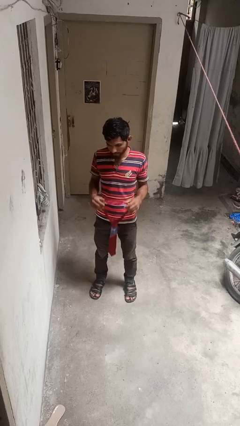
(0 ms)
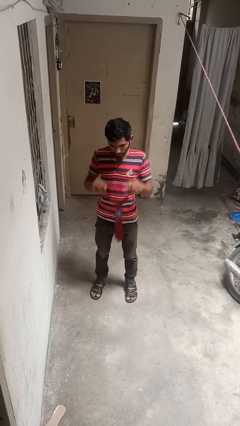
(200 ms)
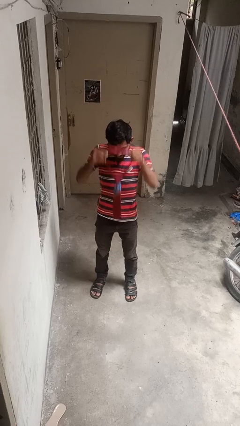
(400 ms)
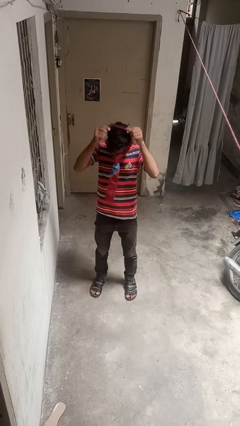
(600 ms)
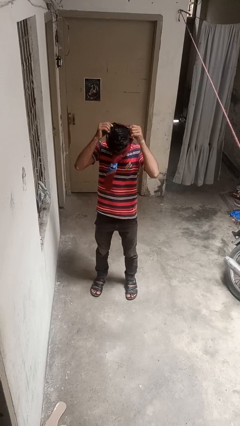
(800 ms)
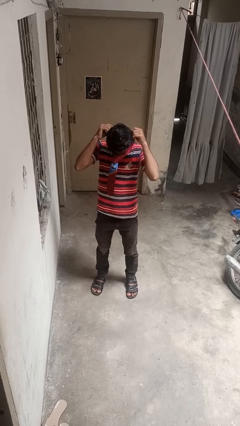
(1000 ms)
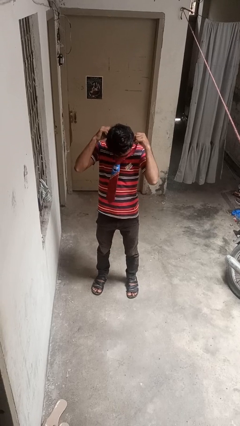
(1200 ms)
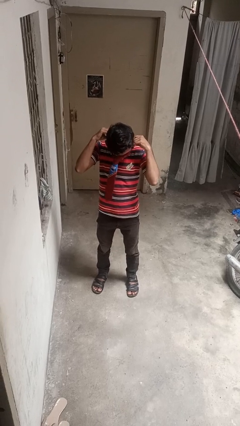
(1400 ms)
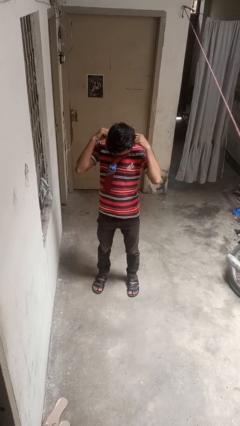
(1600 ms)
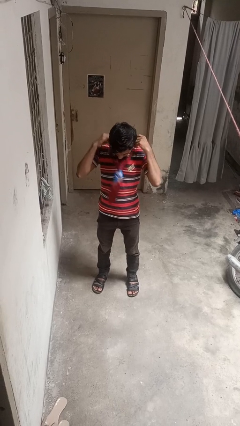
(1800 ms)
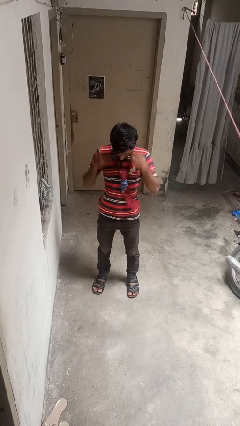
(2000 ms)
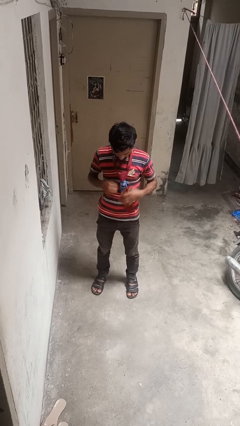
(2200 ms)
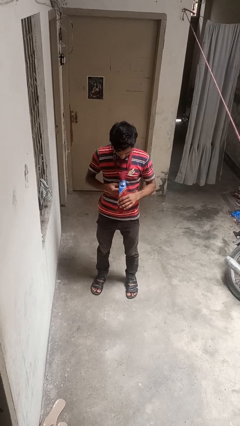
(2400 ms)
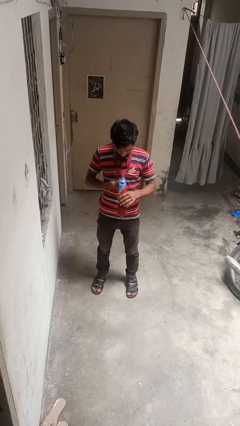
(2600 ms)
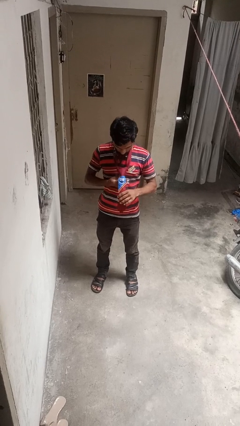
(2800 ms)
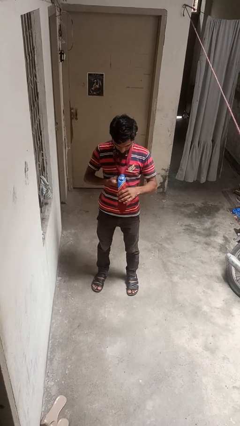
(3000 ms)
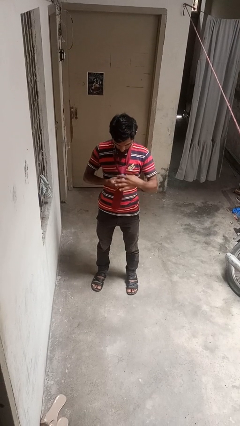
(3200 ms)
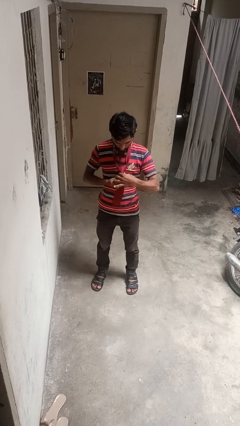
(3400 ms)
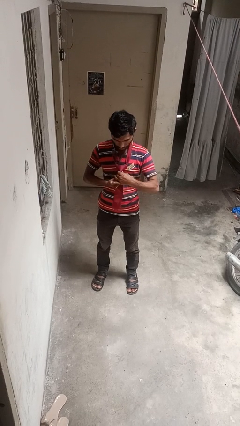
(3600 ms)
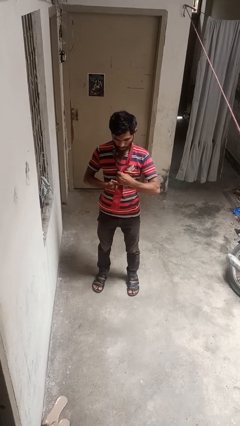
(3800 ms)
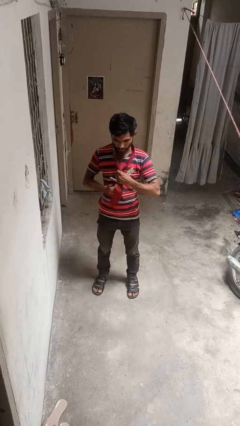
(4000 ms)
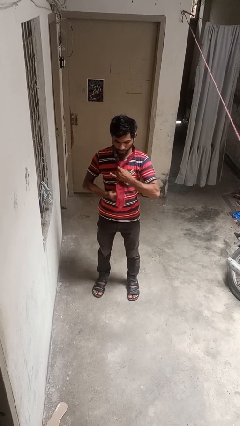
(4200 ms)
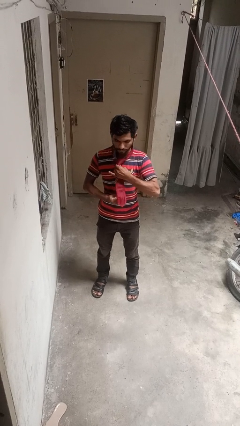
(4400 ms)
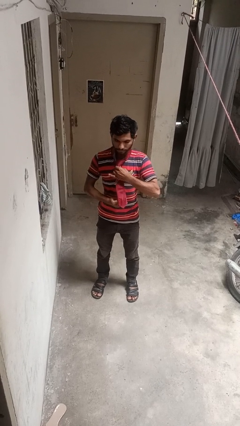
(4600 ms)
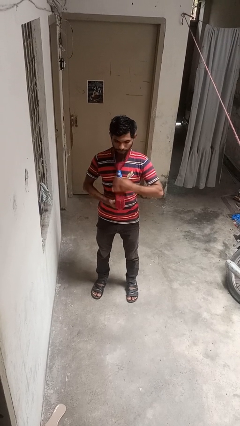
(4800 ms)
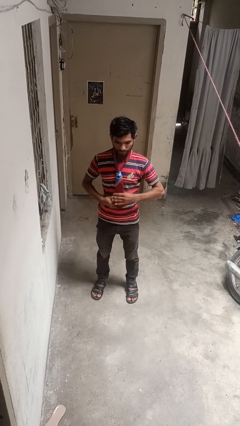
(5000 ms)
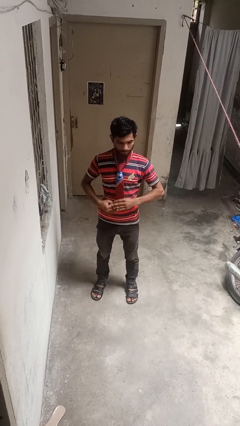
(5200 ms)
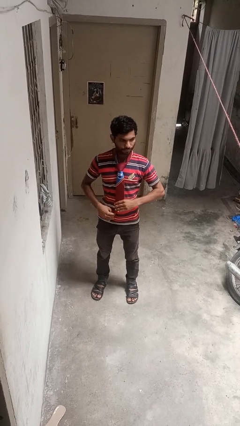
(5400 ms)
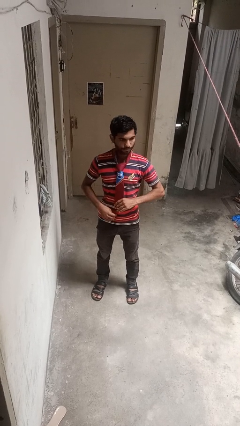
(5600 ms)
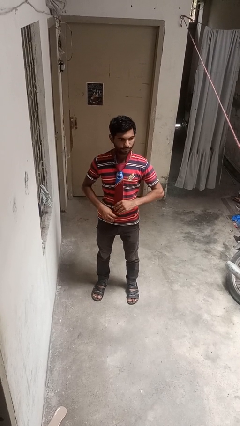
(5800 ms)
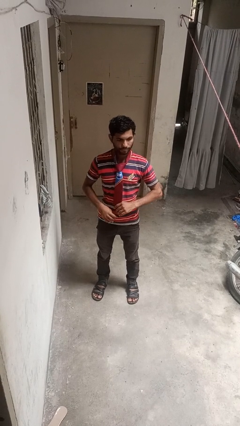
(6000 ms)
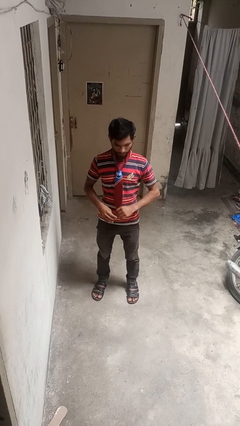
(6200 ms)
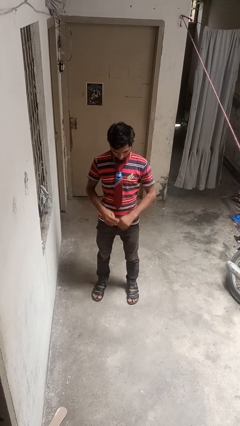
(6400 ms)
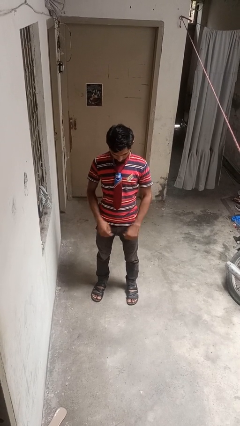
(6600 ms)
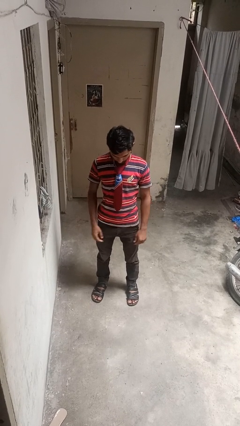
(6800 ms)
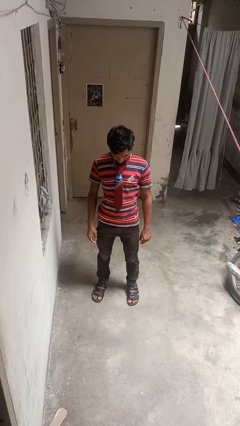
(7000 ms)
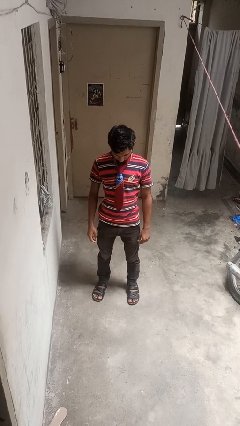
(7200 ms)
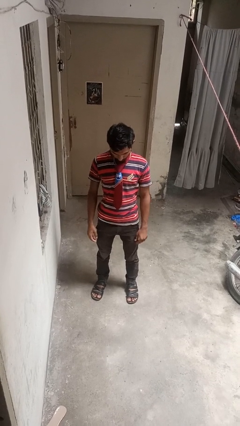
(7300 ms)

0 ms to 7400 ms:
person puts on necktie

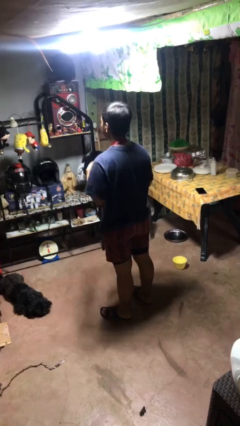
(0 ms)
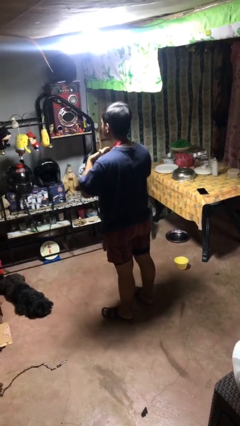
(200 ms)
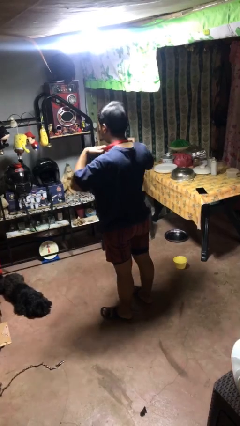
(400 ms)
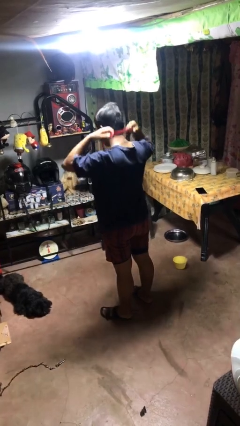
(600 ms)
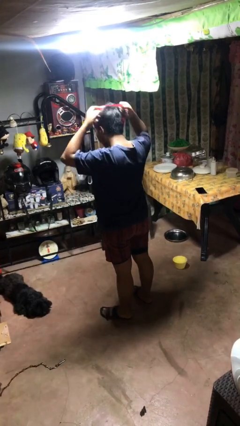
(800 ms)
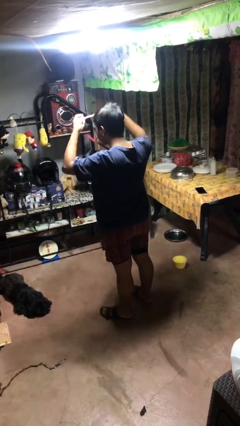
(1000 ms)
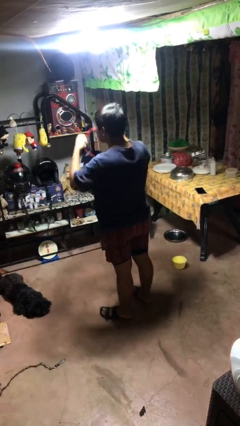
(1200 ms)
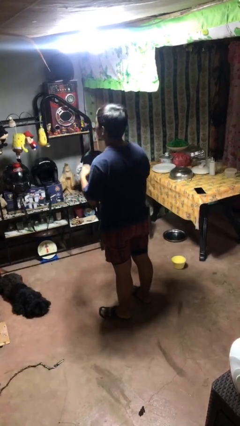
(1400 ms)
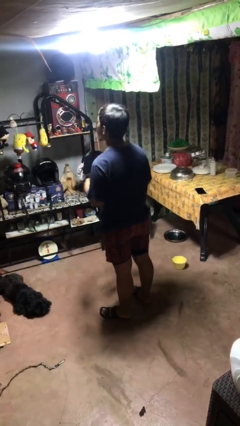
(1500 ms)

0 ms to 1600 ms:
person takes off necklace

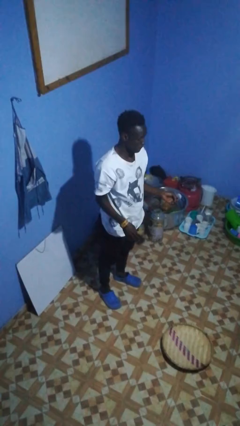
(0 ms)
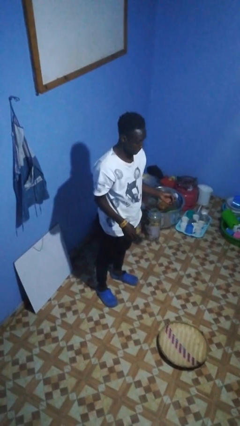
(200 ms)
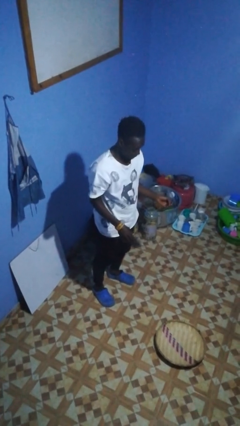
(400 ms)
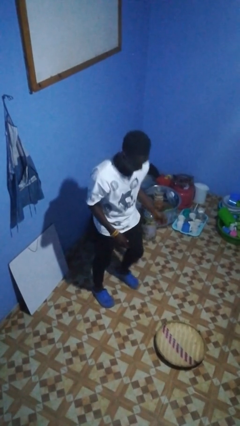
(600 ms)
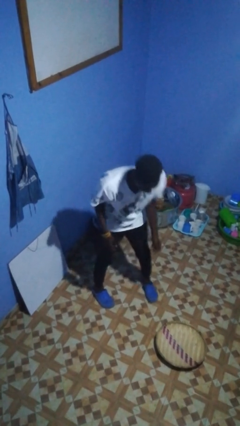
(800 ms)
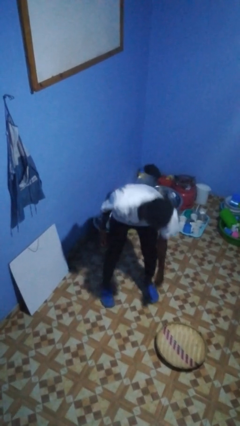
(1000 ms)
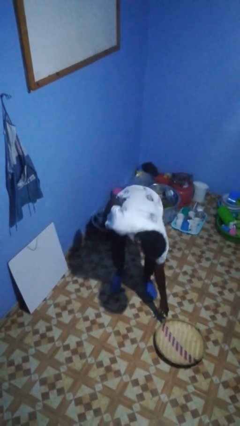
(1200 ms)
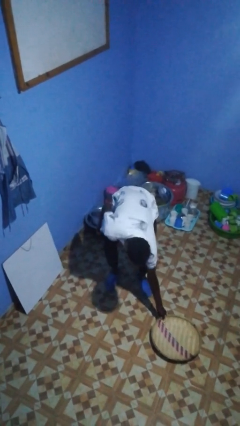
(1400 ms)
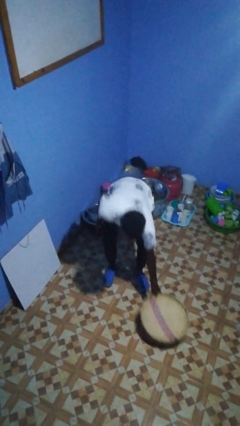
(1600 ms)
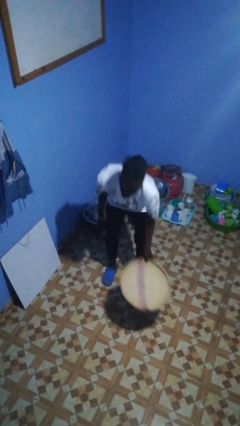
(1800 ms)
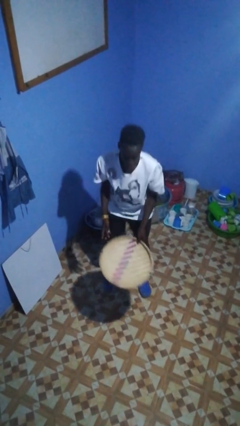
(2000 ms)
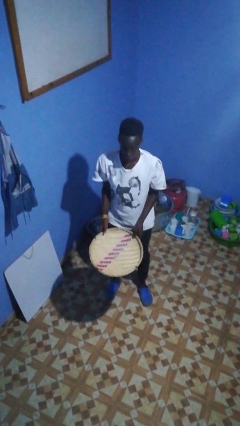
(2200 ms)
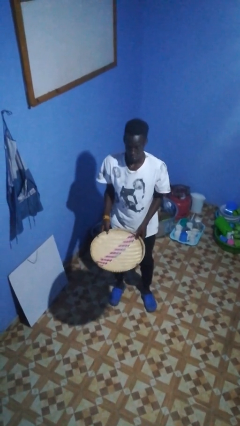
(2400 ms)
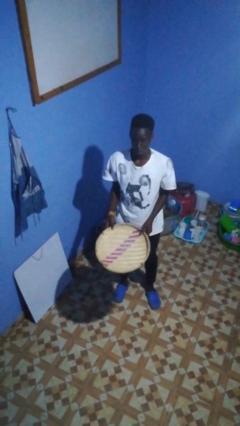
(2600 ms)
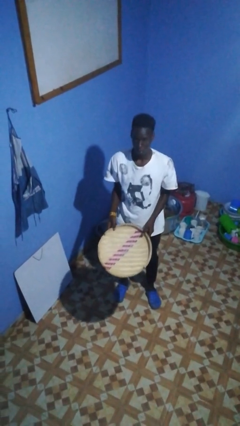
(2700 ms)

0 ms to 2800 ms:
person picks up object from floor

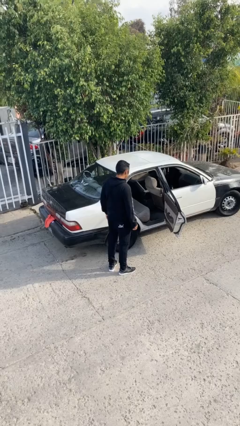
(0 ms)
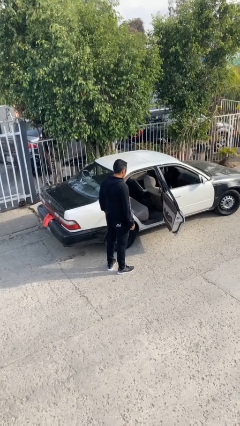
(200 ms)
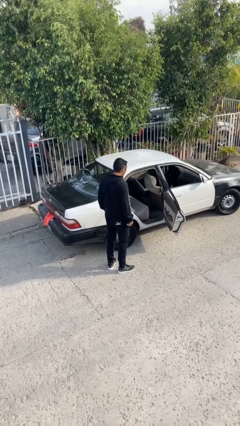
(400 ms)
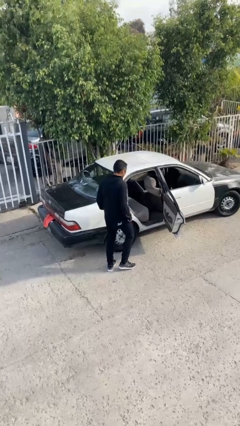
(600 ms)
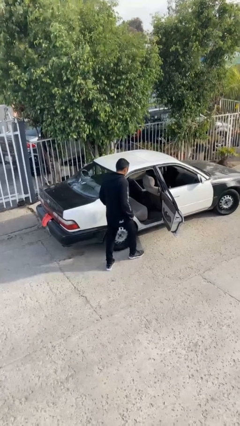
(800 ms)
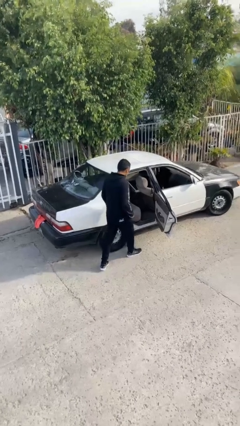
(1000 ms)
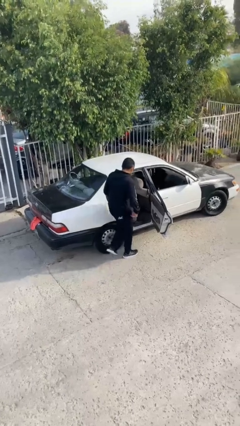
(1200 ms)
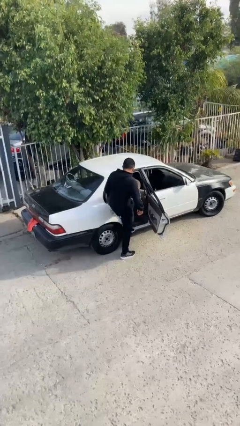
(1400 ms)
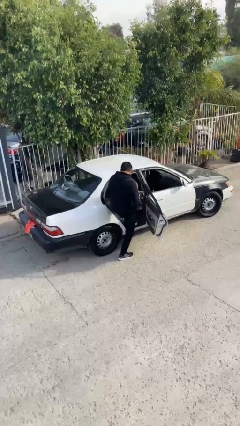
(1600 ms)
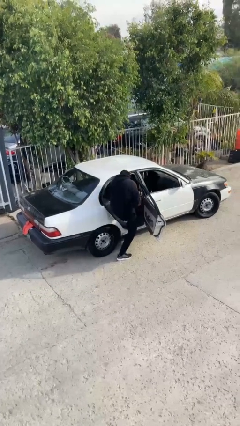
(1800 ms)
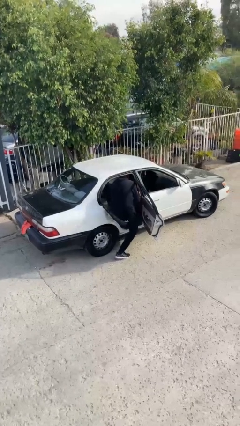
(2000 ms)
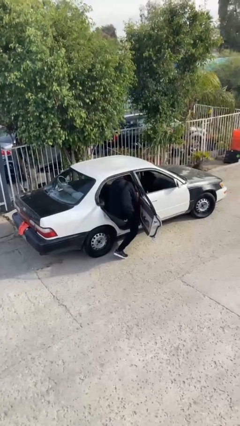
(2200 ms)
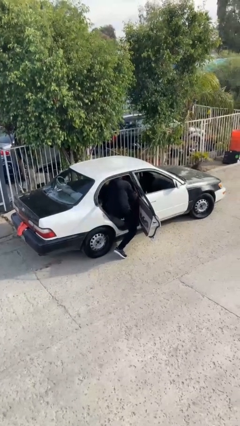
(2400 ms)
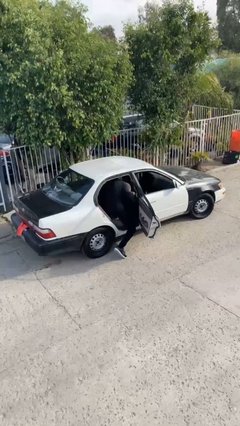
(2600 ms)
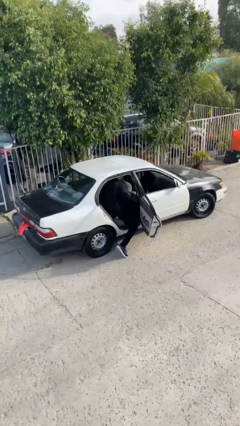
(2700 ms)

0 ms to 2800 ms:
person enters car

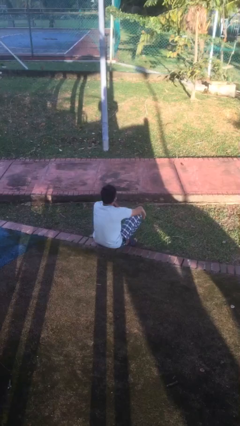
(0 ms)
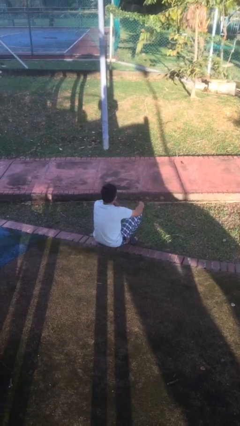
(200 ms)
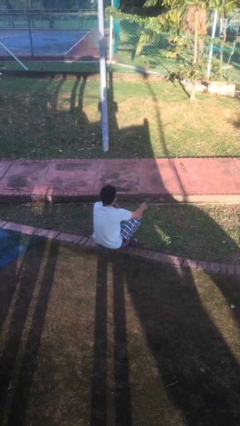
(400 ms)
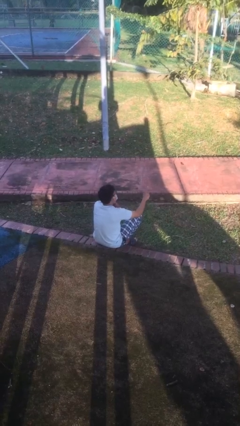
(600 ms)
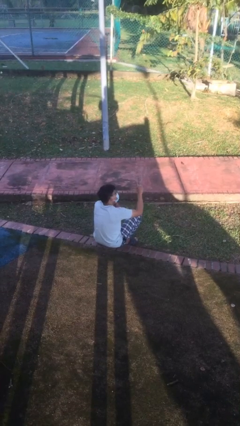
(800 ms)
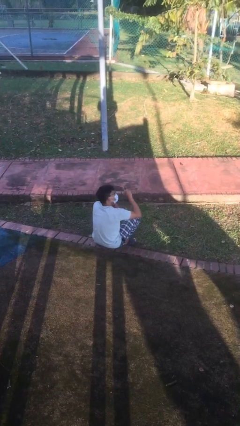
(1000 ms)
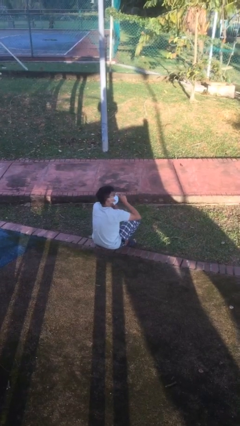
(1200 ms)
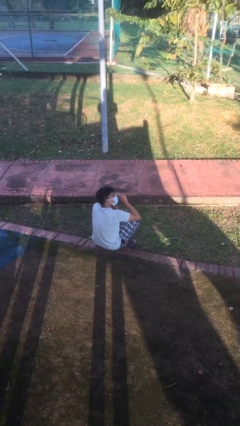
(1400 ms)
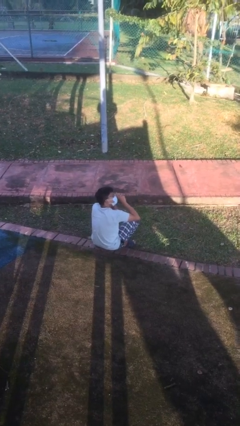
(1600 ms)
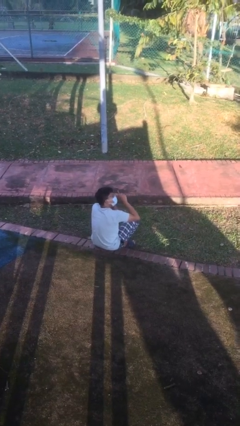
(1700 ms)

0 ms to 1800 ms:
person gestures be quiet

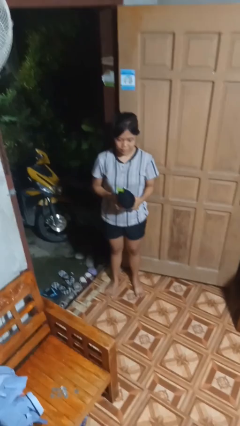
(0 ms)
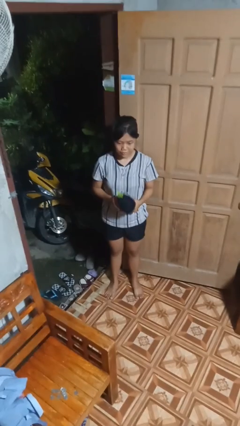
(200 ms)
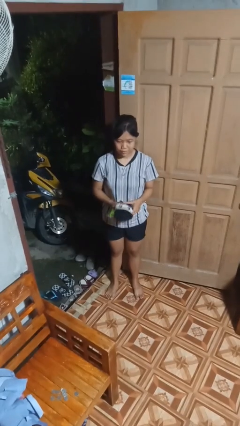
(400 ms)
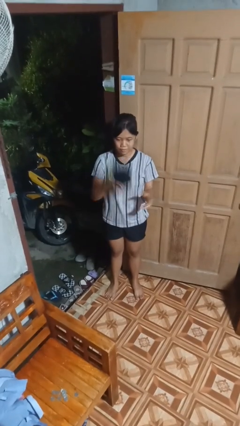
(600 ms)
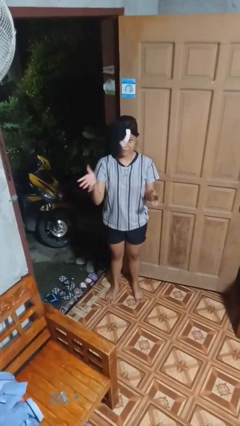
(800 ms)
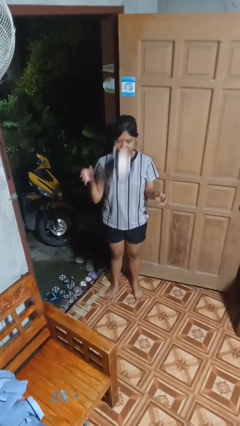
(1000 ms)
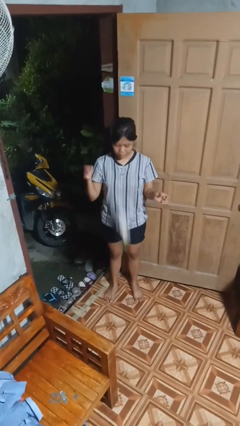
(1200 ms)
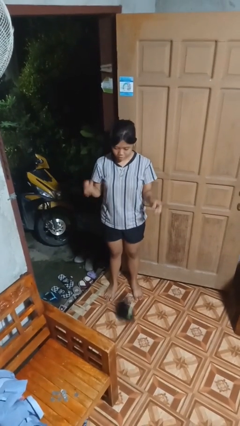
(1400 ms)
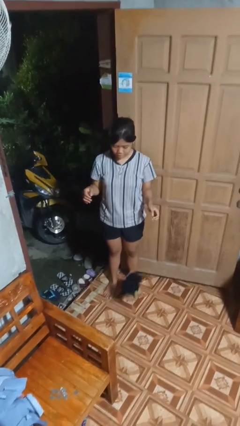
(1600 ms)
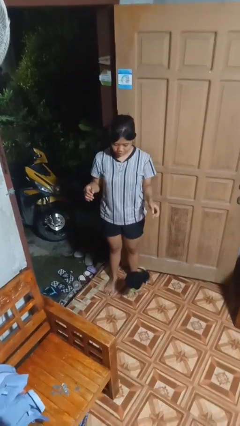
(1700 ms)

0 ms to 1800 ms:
person throws object into air
